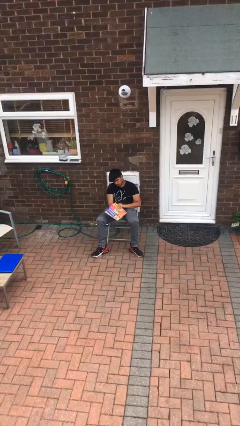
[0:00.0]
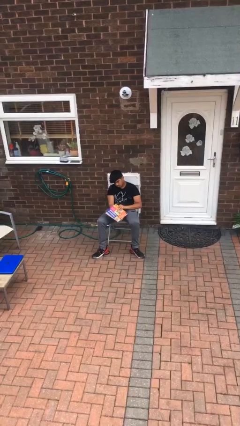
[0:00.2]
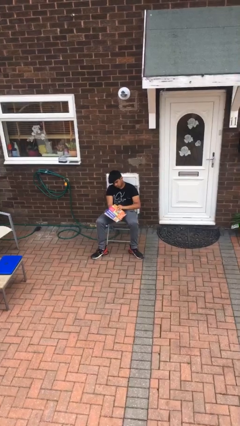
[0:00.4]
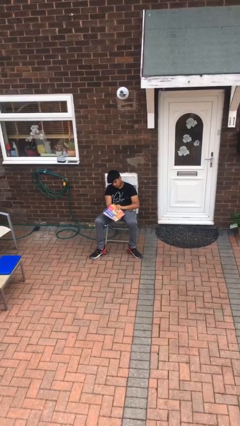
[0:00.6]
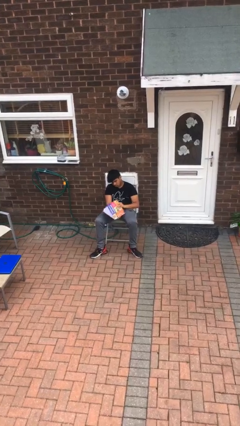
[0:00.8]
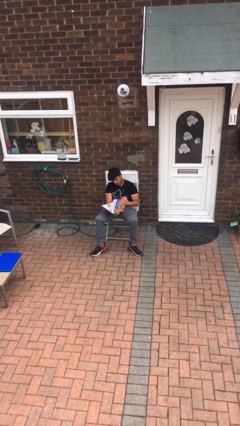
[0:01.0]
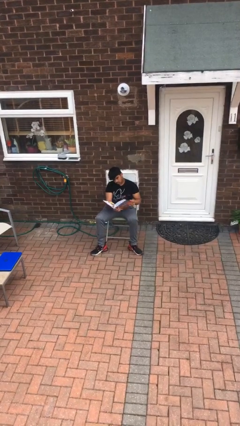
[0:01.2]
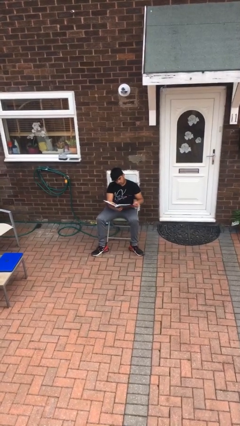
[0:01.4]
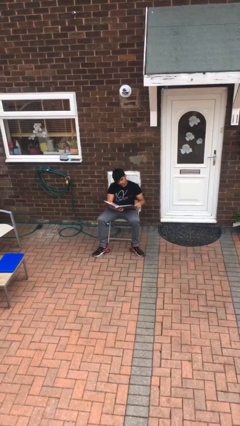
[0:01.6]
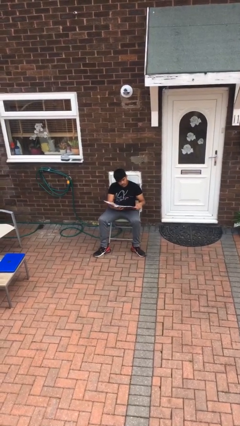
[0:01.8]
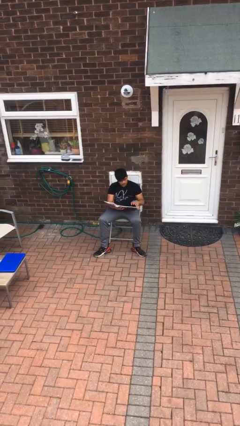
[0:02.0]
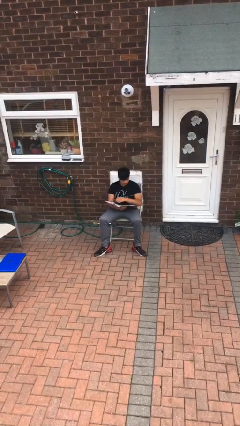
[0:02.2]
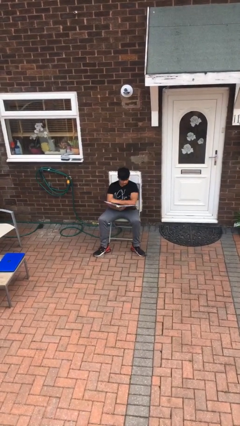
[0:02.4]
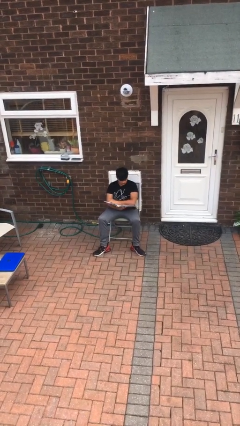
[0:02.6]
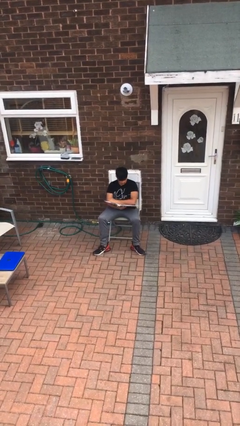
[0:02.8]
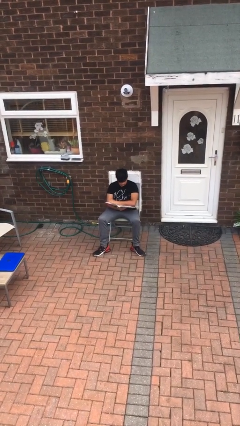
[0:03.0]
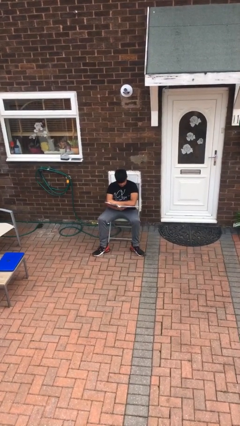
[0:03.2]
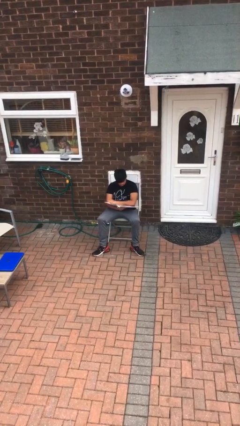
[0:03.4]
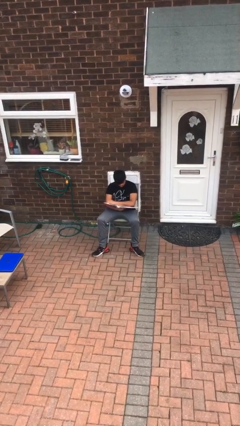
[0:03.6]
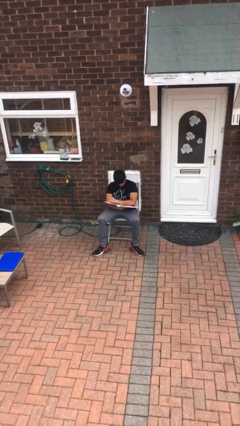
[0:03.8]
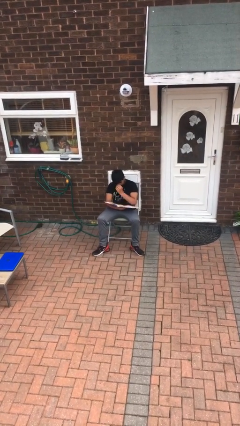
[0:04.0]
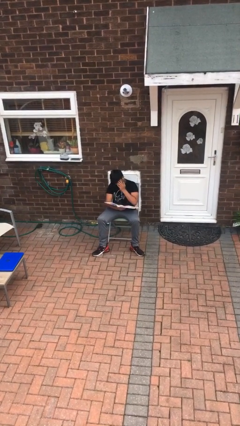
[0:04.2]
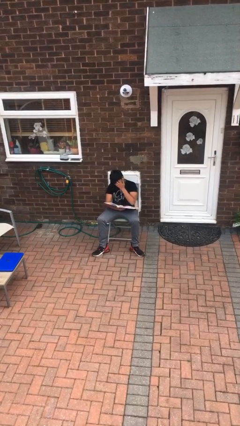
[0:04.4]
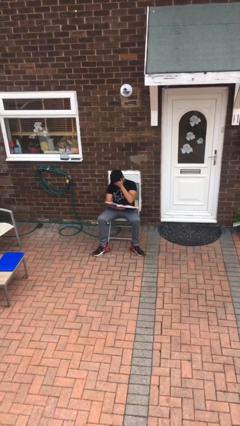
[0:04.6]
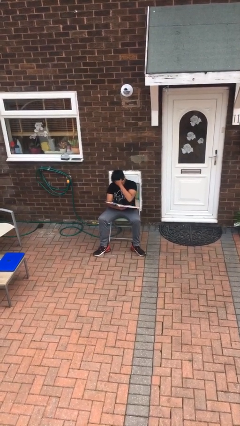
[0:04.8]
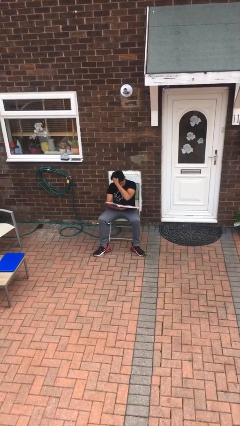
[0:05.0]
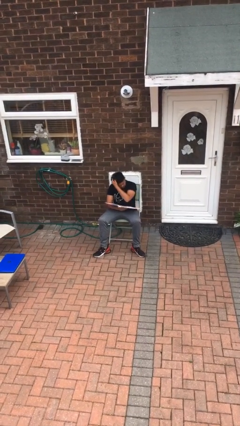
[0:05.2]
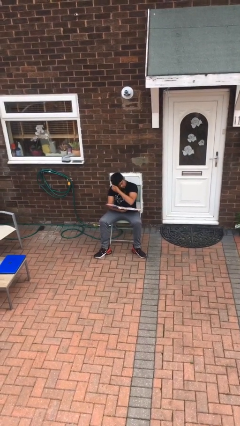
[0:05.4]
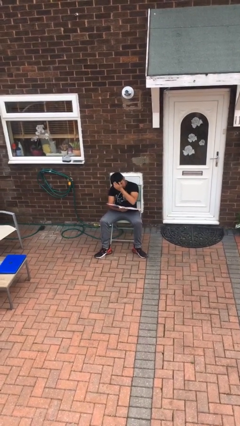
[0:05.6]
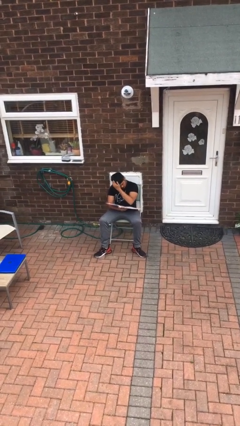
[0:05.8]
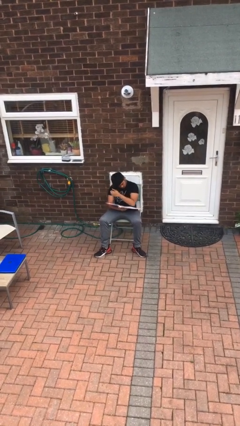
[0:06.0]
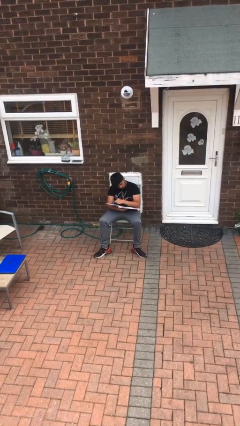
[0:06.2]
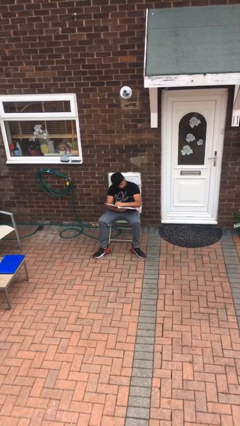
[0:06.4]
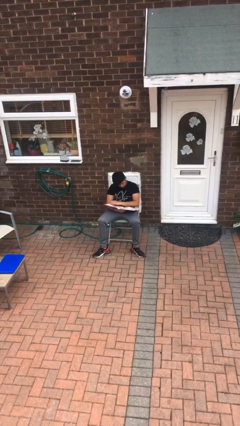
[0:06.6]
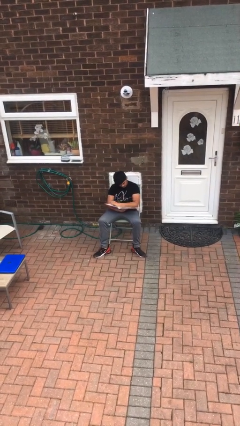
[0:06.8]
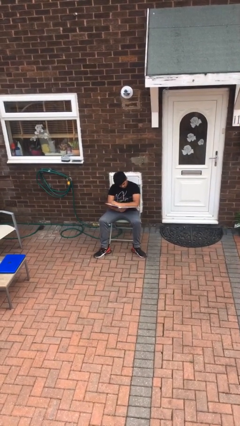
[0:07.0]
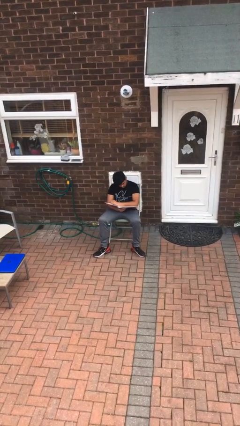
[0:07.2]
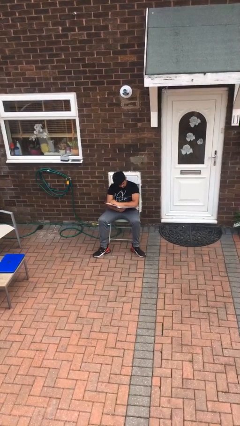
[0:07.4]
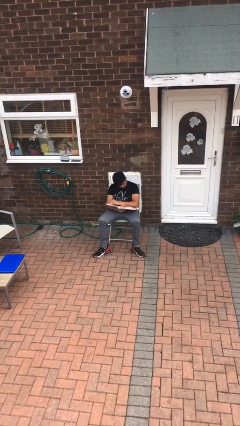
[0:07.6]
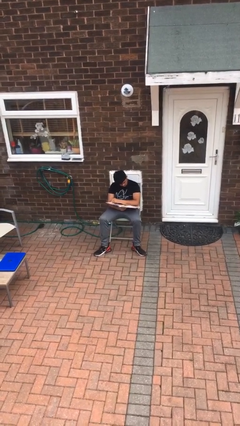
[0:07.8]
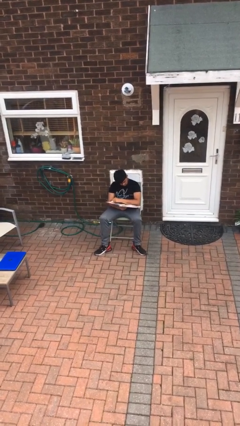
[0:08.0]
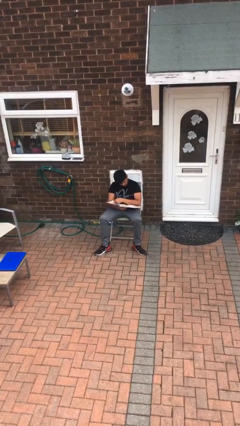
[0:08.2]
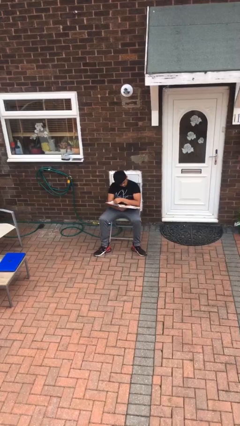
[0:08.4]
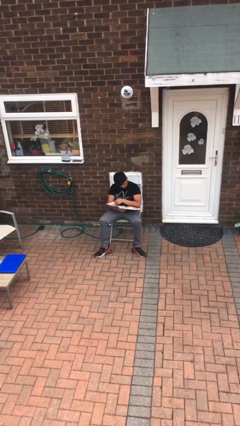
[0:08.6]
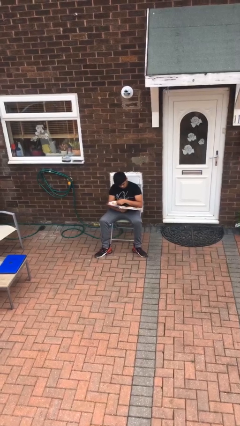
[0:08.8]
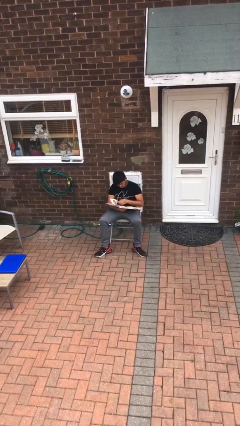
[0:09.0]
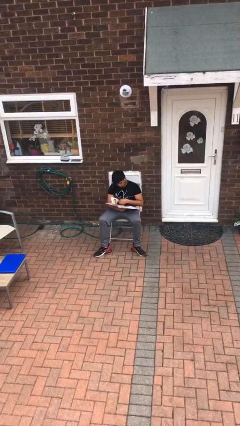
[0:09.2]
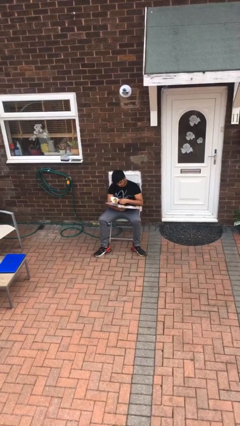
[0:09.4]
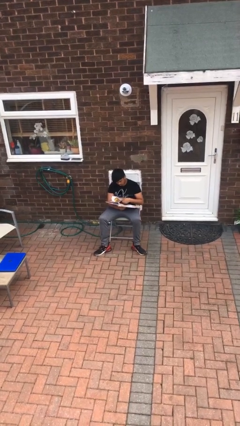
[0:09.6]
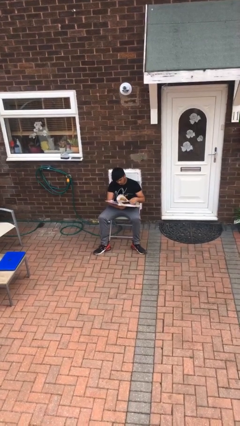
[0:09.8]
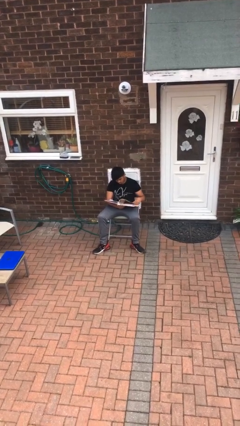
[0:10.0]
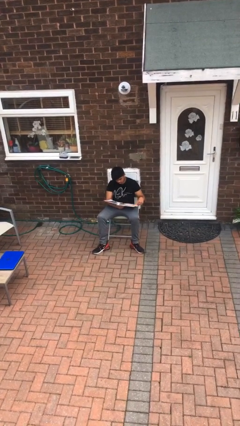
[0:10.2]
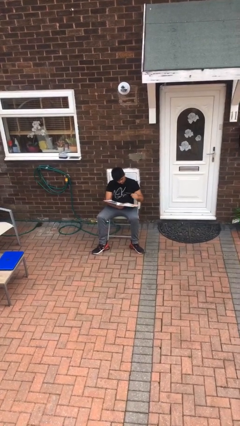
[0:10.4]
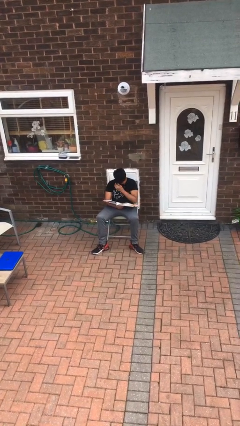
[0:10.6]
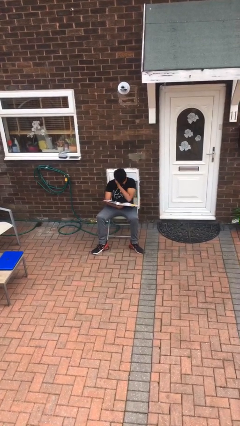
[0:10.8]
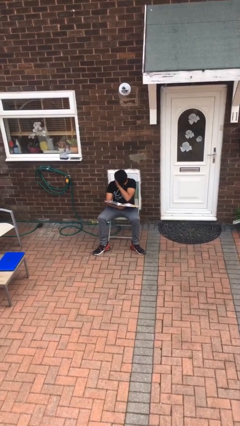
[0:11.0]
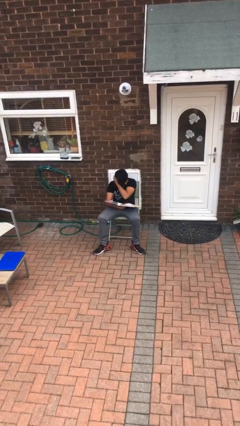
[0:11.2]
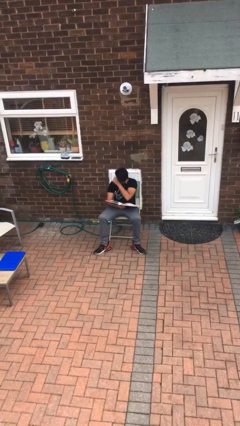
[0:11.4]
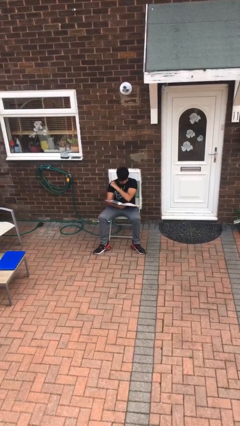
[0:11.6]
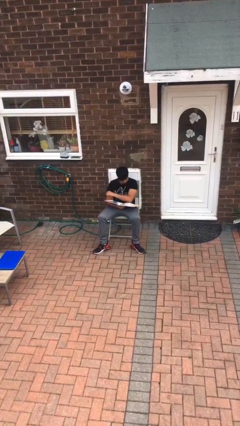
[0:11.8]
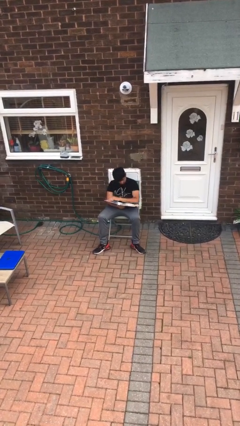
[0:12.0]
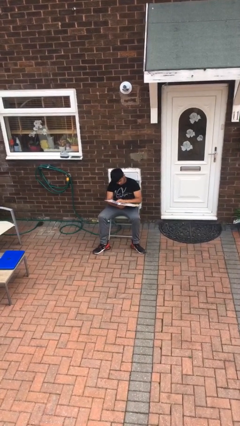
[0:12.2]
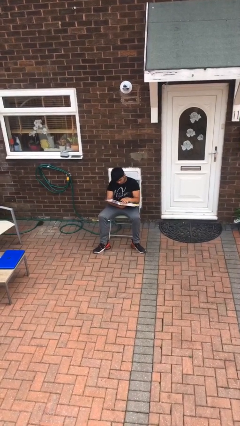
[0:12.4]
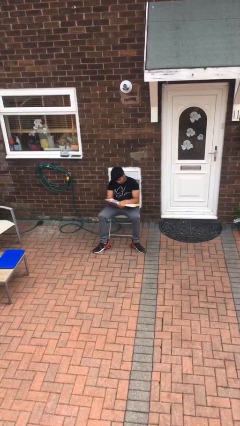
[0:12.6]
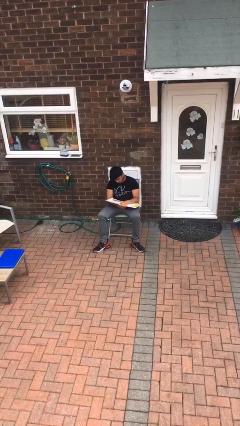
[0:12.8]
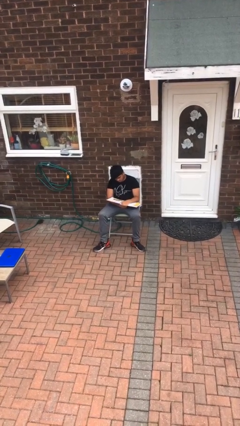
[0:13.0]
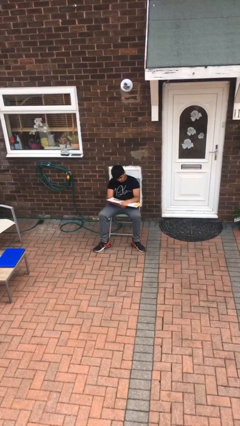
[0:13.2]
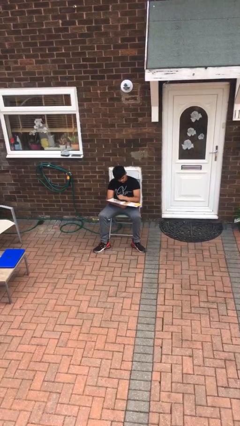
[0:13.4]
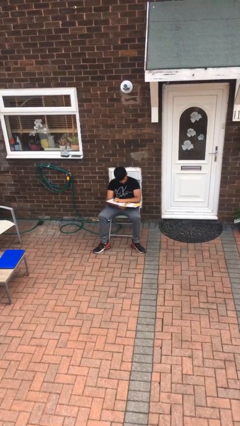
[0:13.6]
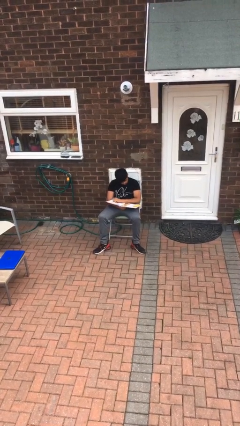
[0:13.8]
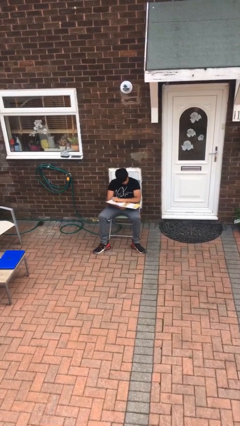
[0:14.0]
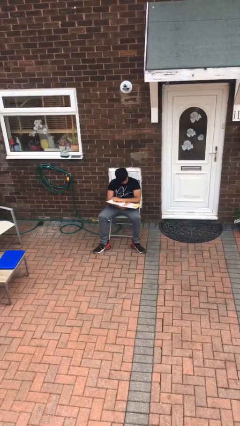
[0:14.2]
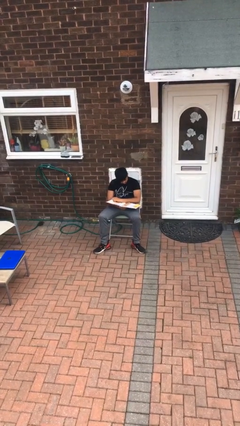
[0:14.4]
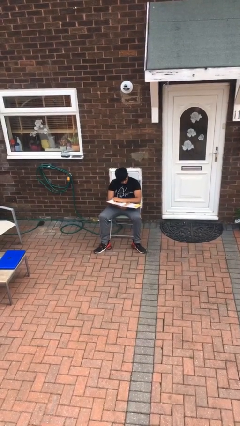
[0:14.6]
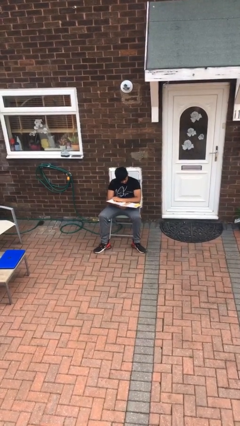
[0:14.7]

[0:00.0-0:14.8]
person reads document

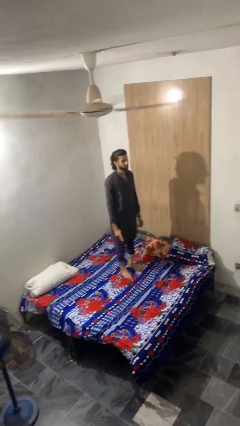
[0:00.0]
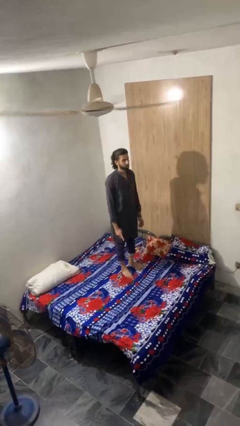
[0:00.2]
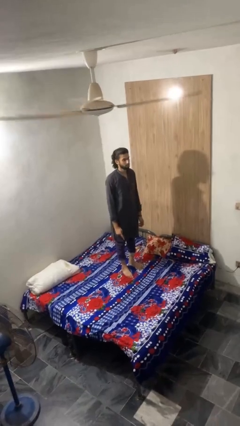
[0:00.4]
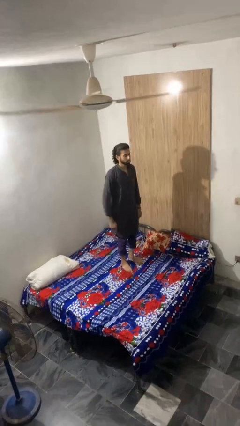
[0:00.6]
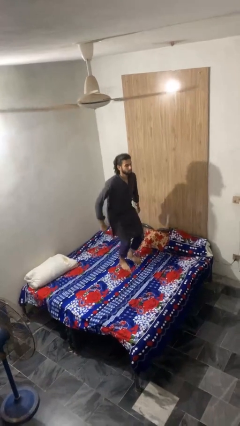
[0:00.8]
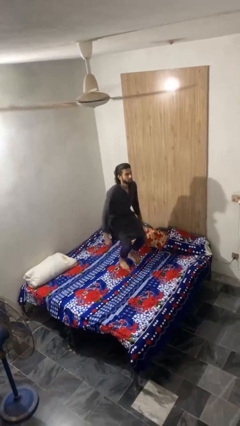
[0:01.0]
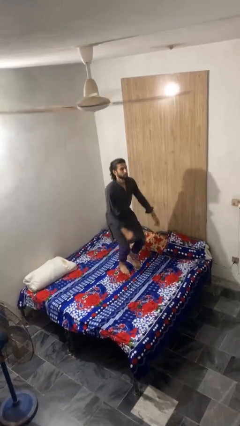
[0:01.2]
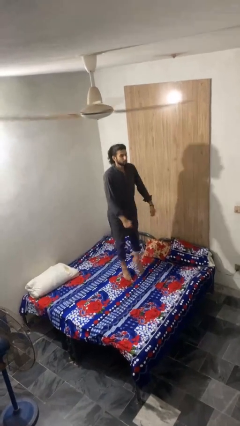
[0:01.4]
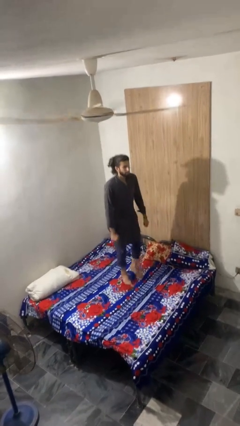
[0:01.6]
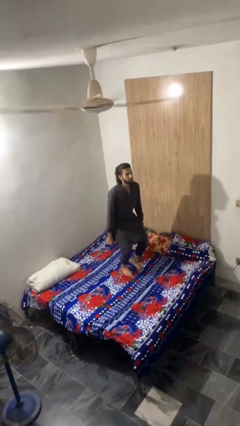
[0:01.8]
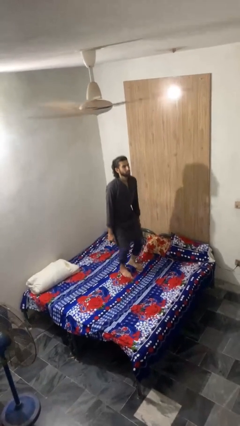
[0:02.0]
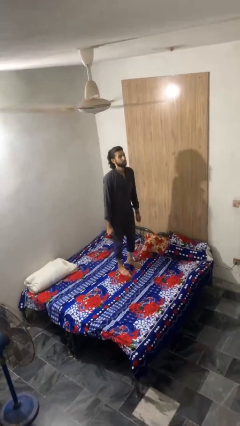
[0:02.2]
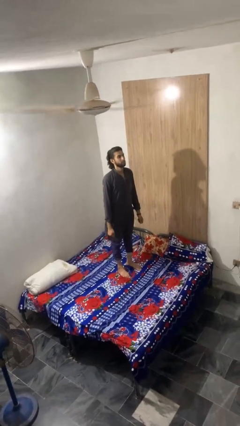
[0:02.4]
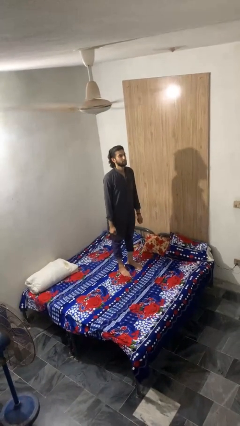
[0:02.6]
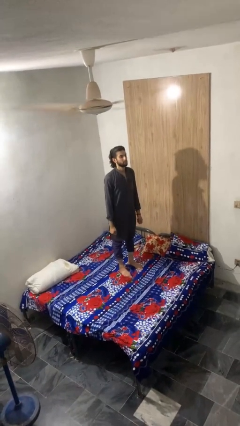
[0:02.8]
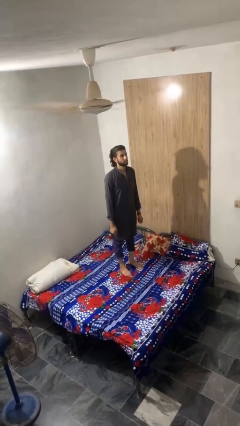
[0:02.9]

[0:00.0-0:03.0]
person jumps on bed

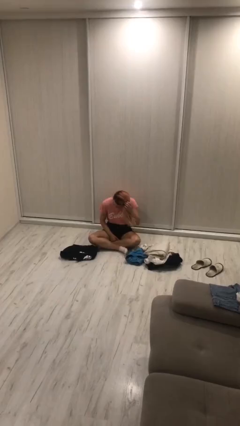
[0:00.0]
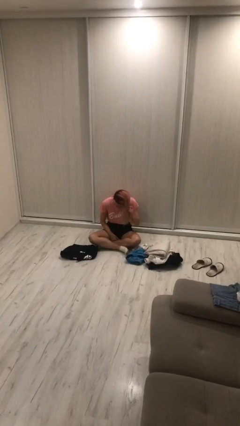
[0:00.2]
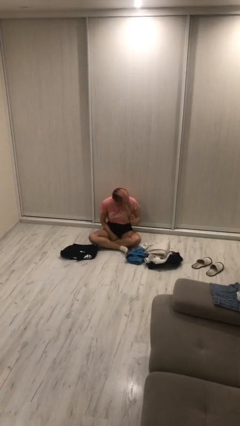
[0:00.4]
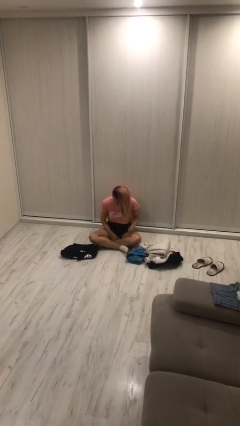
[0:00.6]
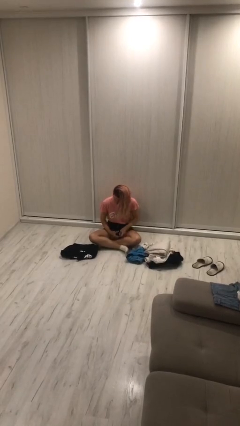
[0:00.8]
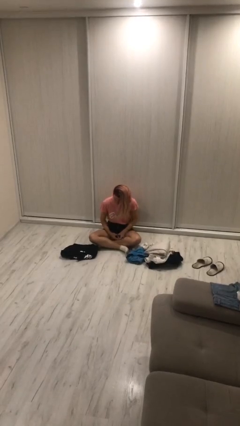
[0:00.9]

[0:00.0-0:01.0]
person takes off hairtie
